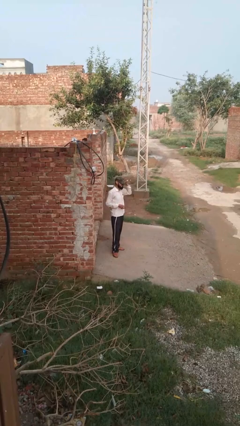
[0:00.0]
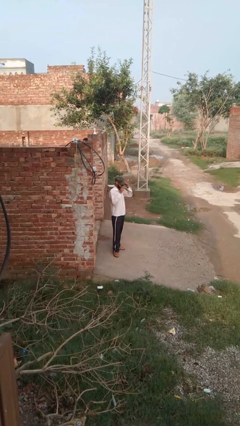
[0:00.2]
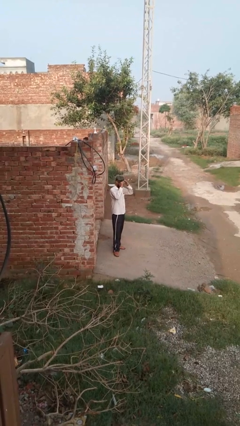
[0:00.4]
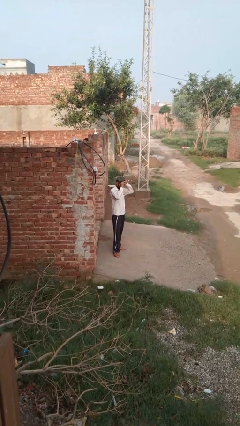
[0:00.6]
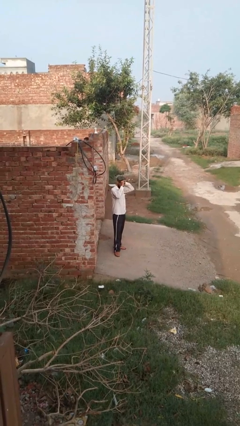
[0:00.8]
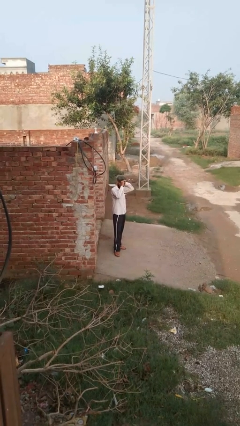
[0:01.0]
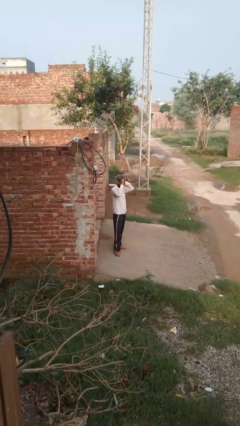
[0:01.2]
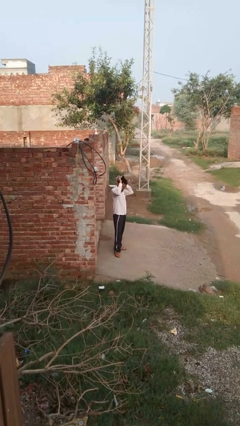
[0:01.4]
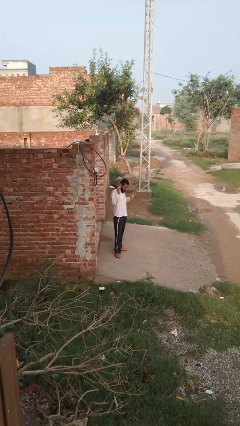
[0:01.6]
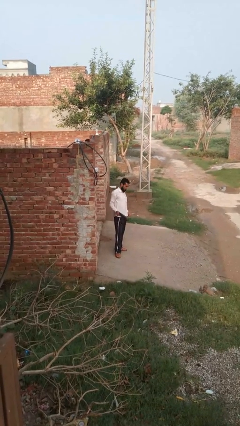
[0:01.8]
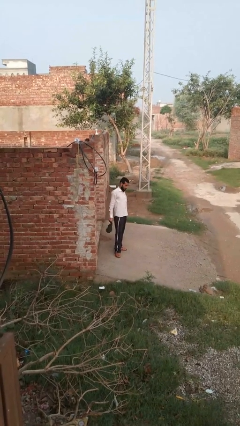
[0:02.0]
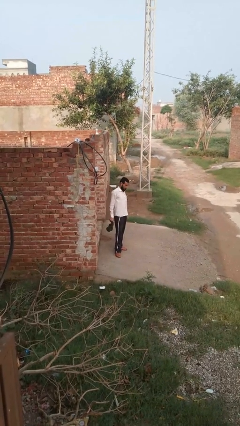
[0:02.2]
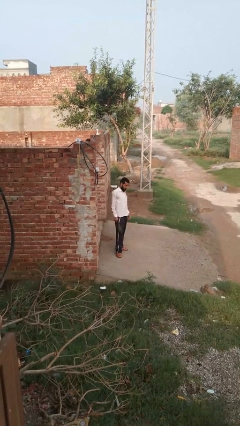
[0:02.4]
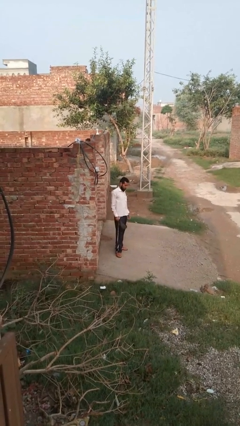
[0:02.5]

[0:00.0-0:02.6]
person takes off hat

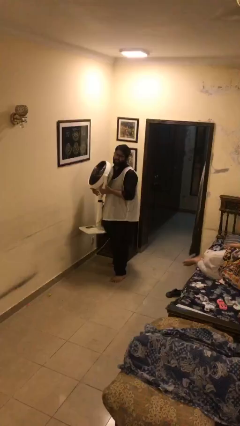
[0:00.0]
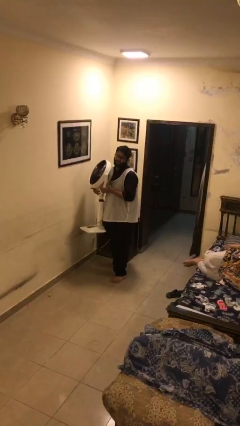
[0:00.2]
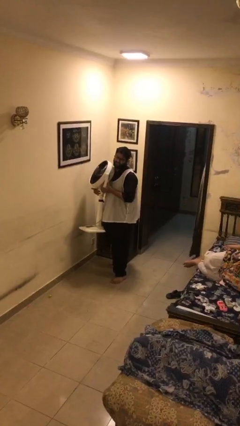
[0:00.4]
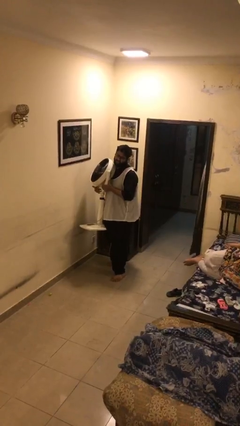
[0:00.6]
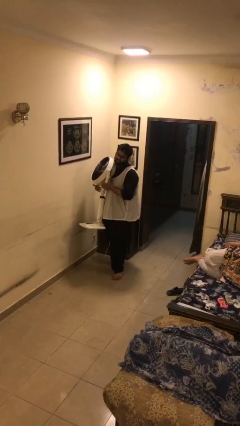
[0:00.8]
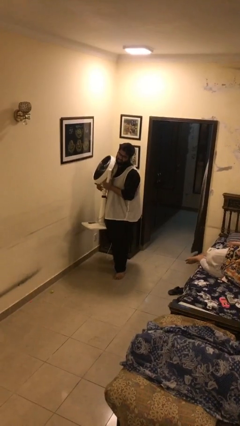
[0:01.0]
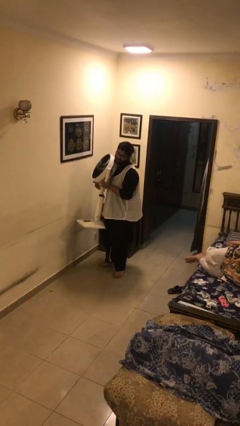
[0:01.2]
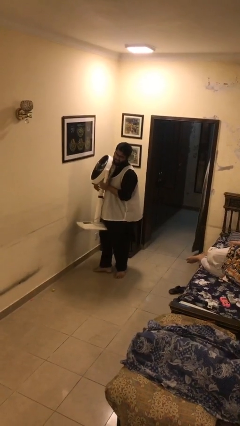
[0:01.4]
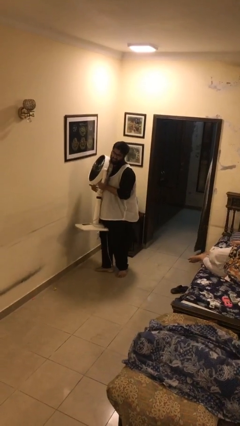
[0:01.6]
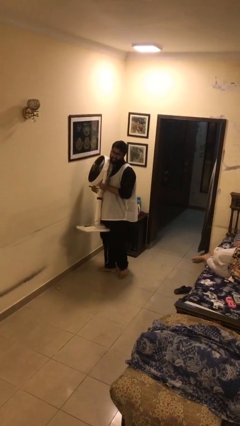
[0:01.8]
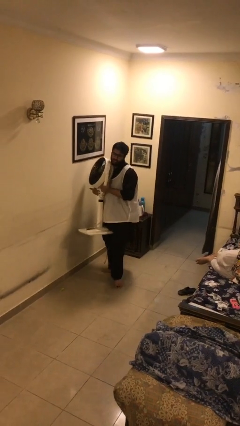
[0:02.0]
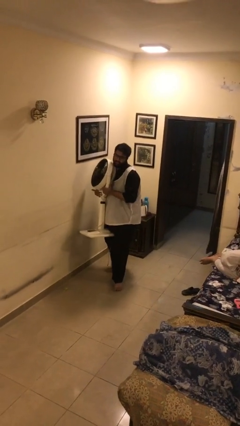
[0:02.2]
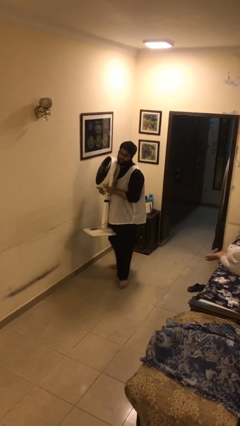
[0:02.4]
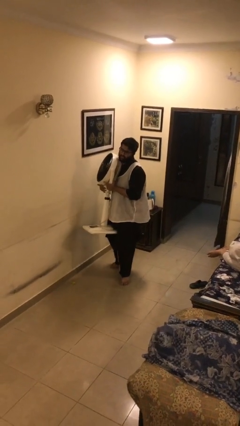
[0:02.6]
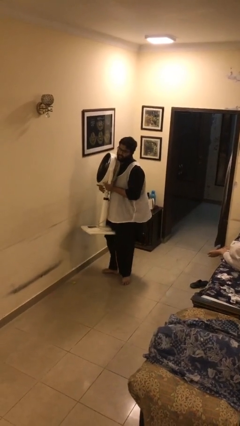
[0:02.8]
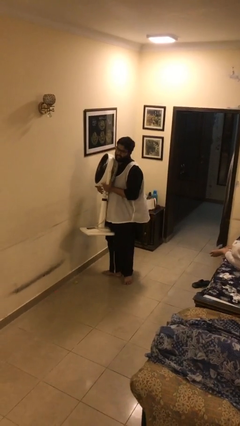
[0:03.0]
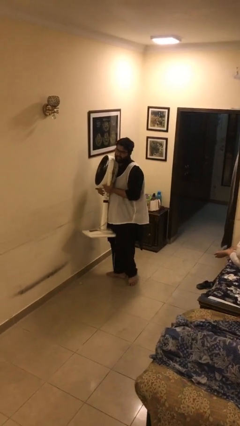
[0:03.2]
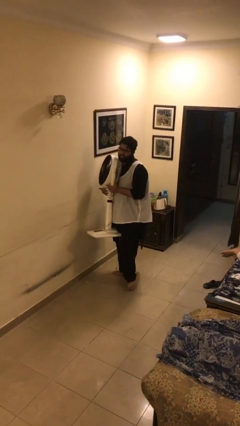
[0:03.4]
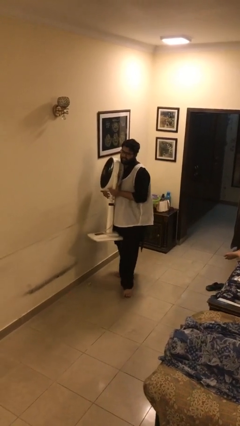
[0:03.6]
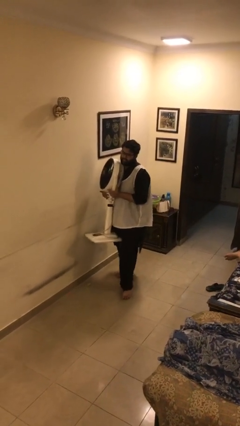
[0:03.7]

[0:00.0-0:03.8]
person carries heavy object

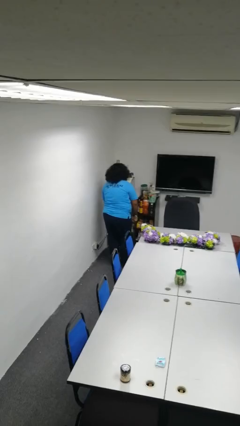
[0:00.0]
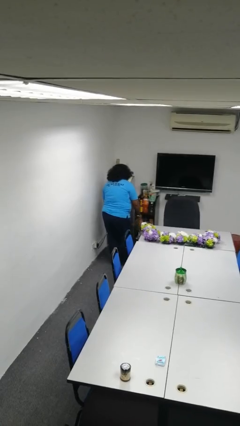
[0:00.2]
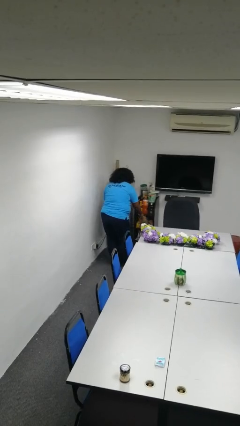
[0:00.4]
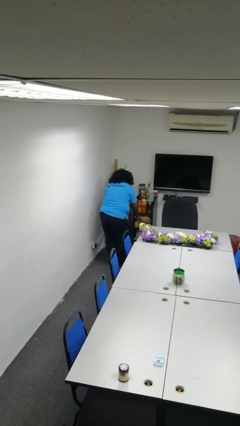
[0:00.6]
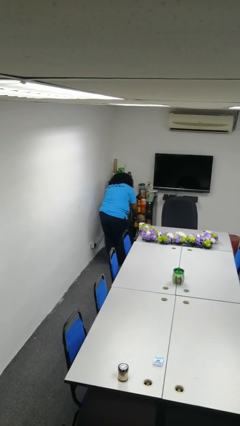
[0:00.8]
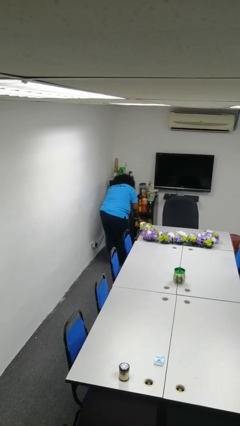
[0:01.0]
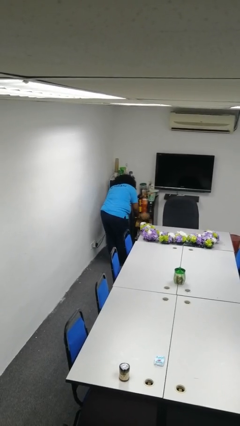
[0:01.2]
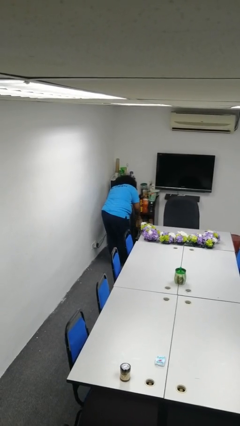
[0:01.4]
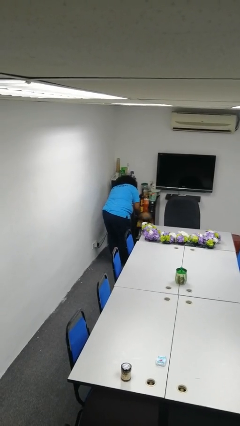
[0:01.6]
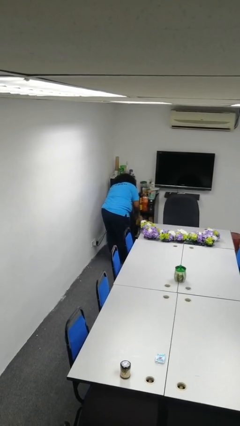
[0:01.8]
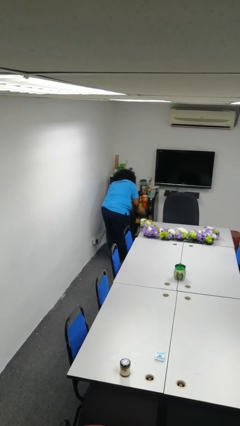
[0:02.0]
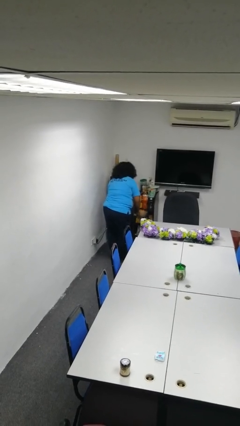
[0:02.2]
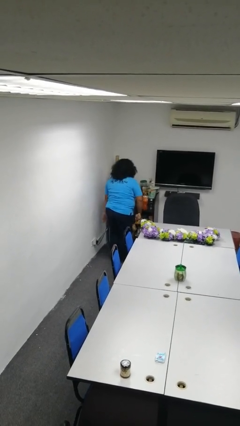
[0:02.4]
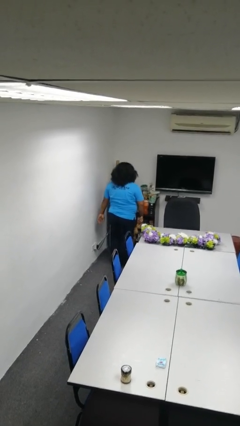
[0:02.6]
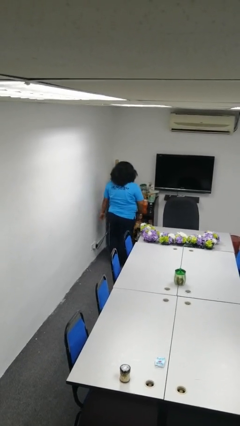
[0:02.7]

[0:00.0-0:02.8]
person dusts furniture

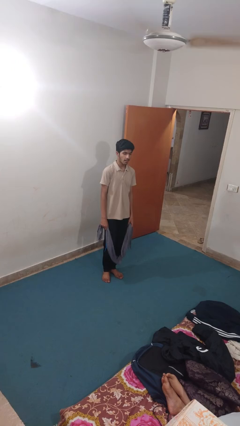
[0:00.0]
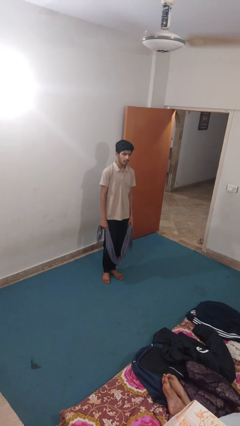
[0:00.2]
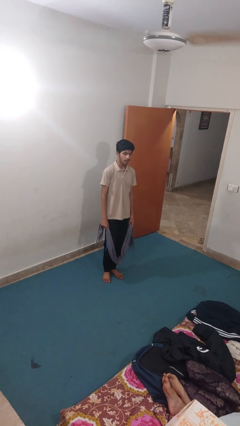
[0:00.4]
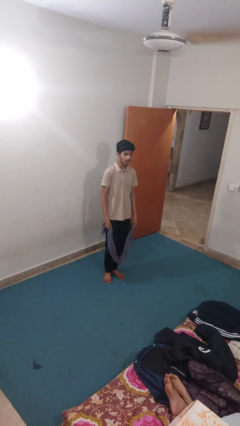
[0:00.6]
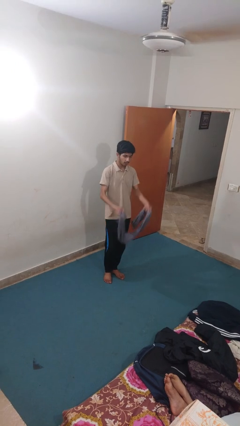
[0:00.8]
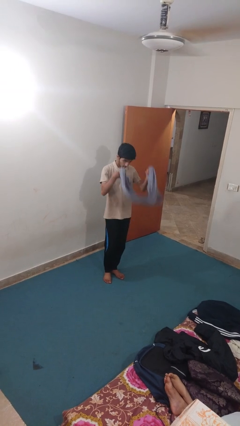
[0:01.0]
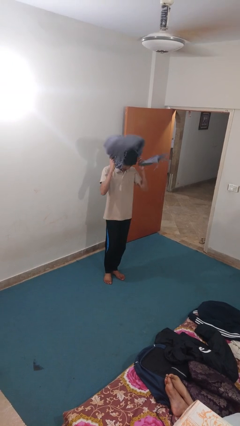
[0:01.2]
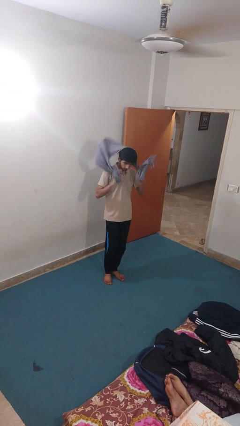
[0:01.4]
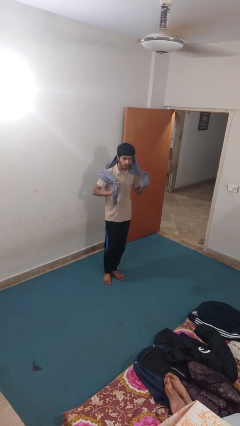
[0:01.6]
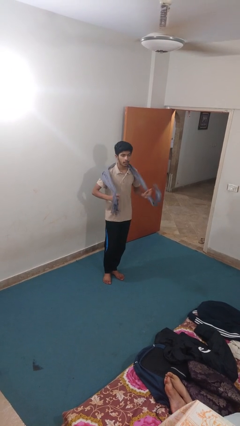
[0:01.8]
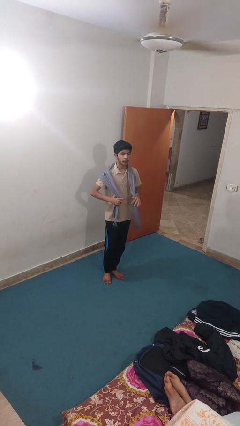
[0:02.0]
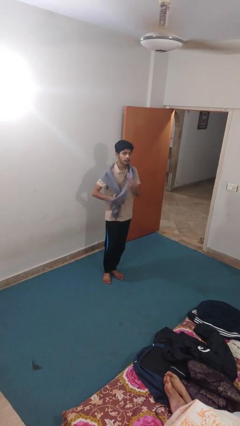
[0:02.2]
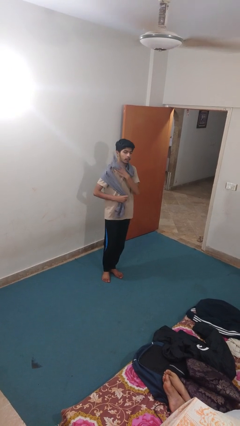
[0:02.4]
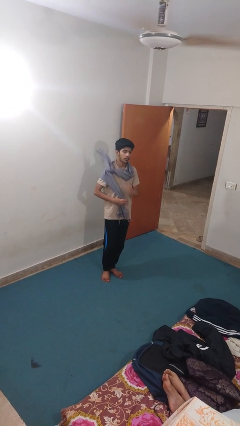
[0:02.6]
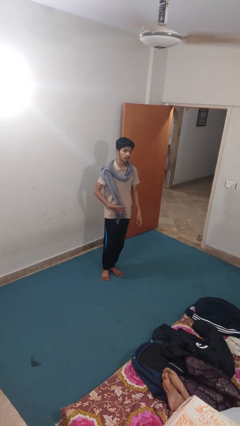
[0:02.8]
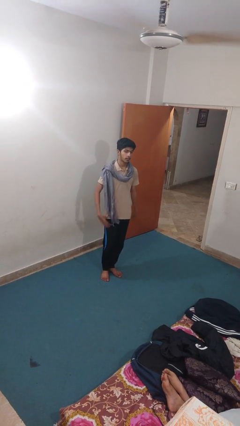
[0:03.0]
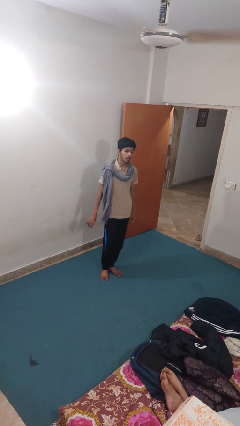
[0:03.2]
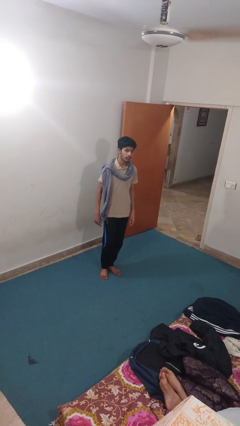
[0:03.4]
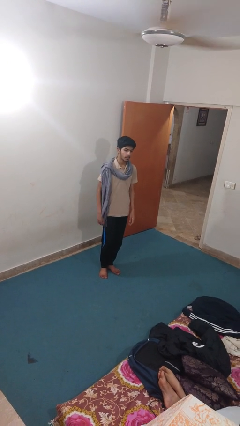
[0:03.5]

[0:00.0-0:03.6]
person puts on scarf

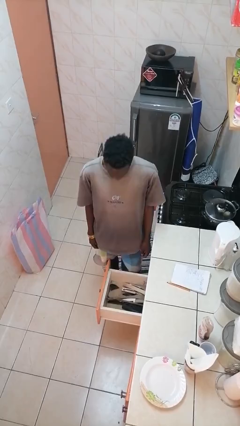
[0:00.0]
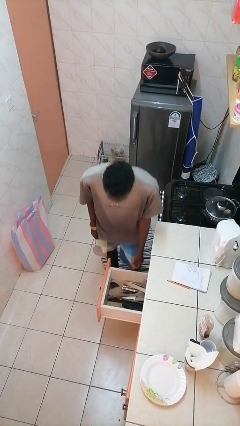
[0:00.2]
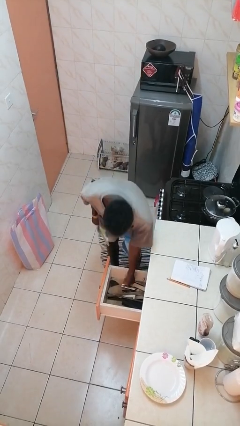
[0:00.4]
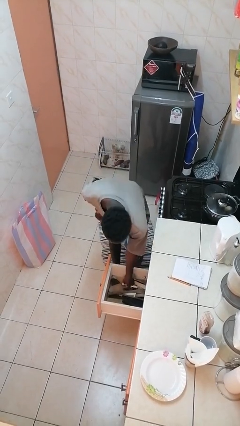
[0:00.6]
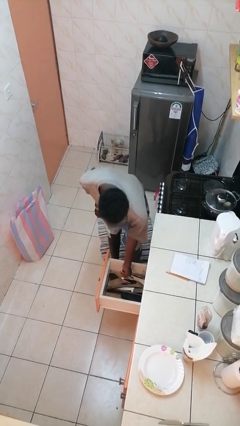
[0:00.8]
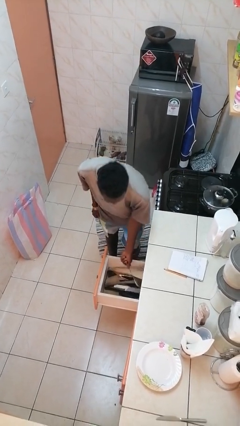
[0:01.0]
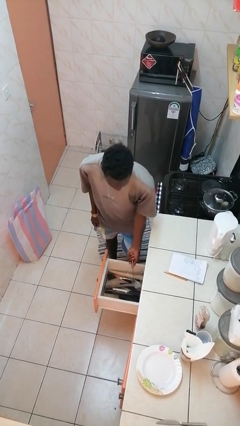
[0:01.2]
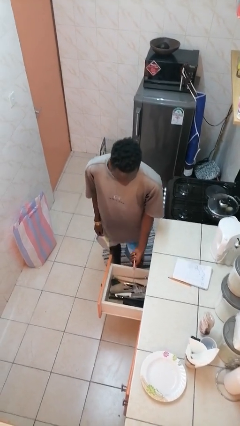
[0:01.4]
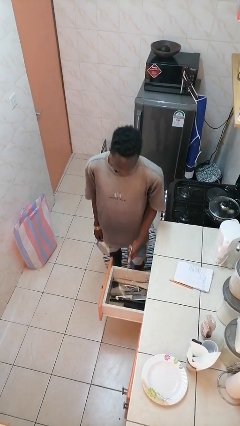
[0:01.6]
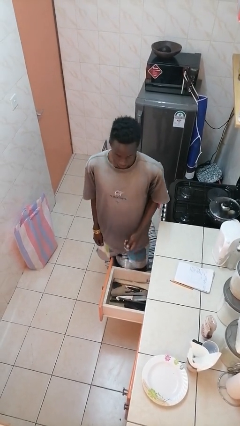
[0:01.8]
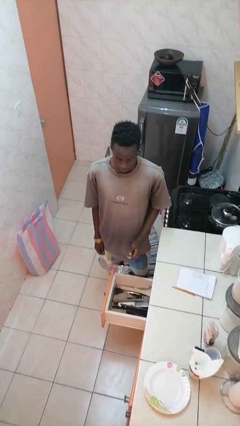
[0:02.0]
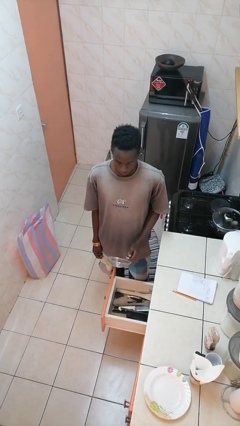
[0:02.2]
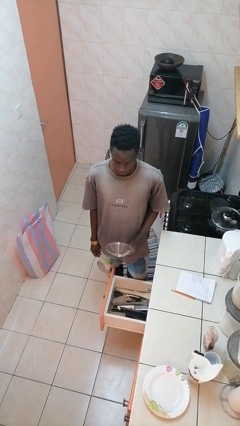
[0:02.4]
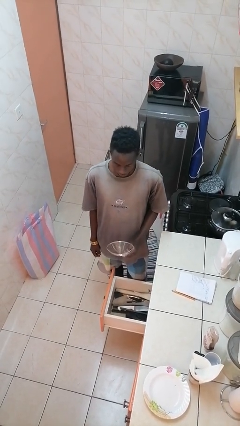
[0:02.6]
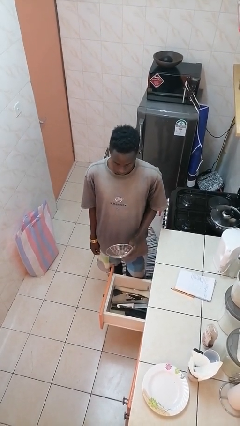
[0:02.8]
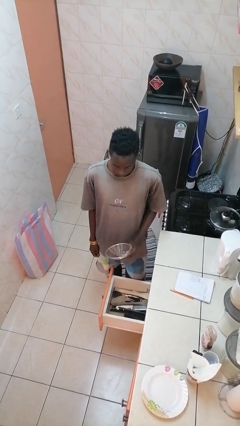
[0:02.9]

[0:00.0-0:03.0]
person takes object from kitchen drawer

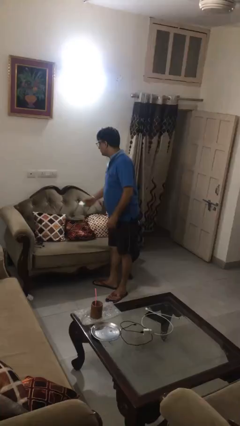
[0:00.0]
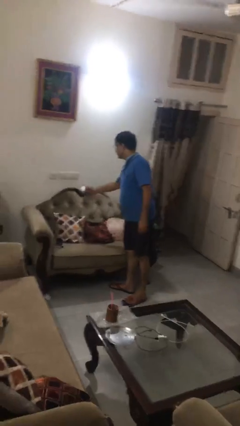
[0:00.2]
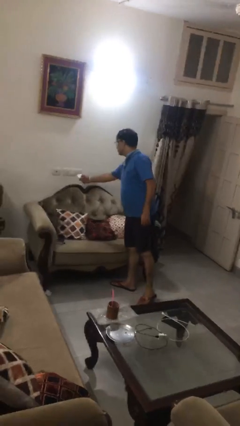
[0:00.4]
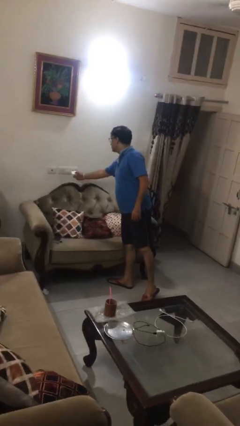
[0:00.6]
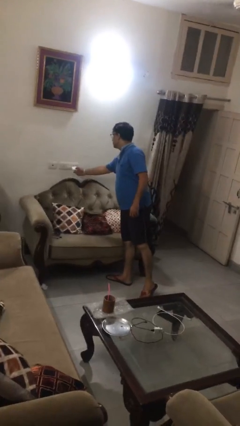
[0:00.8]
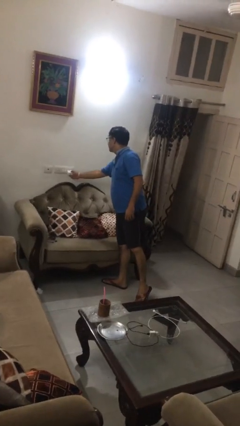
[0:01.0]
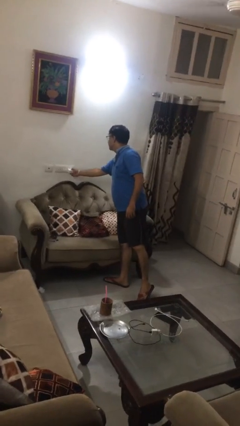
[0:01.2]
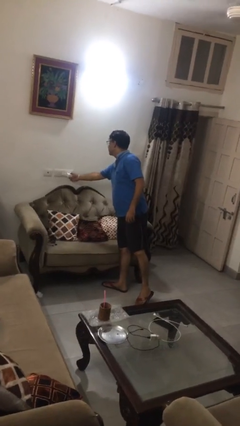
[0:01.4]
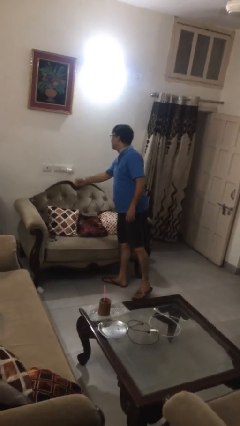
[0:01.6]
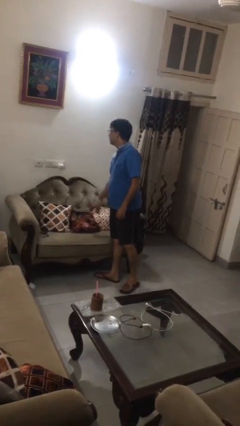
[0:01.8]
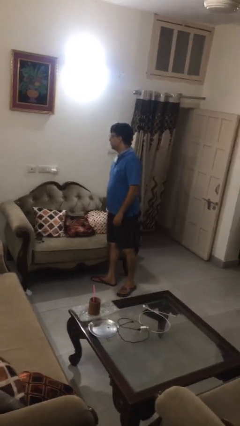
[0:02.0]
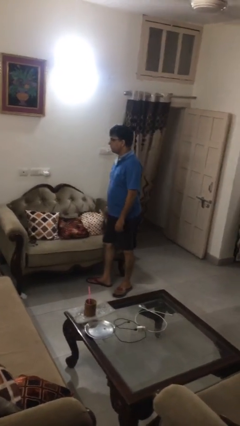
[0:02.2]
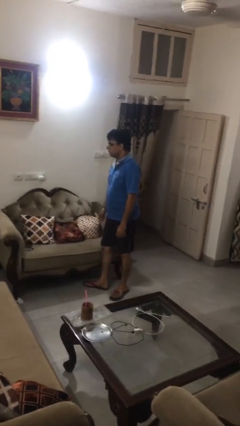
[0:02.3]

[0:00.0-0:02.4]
person plugs into electrical socket
